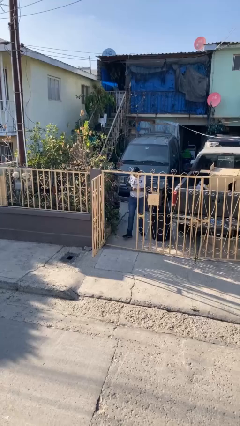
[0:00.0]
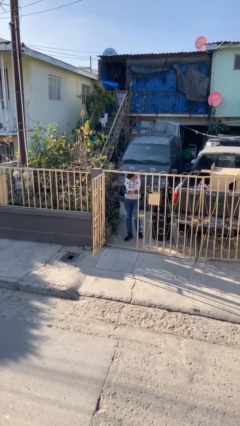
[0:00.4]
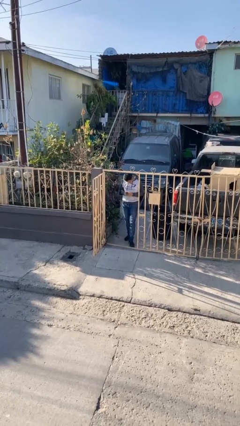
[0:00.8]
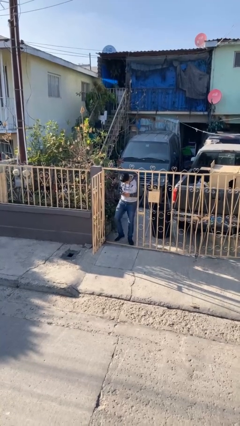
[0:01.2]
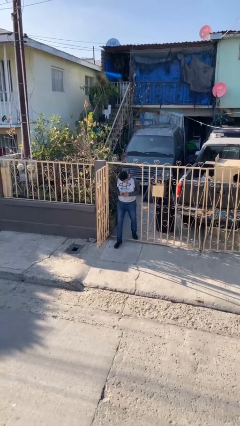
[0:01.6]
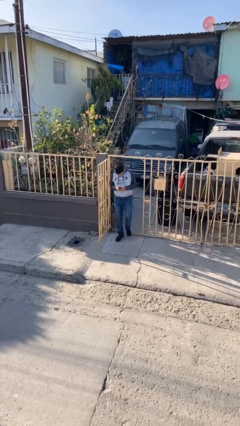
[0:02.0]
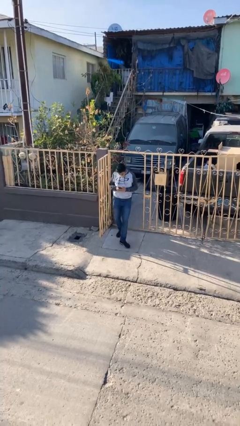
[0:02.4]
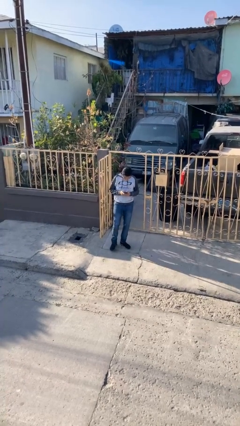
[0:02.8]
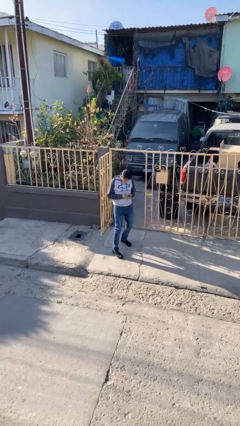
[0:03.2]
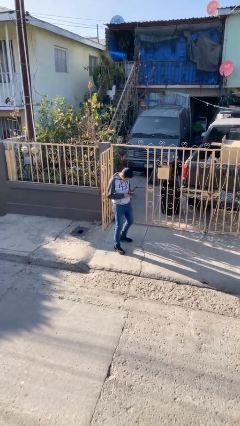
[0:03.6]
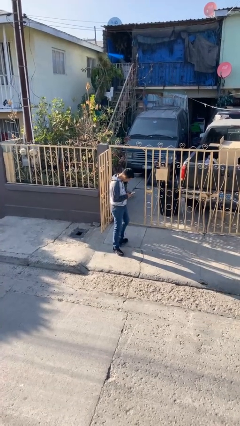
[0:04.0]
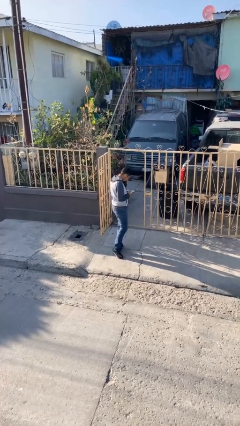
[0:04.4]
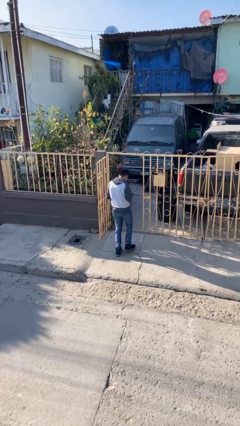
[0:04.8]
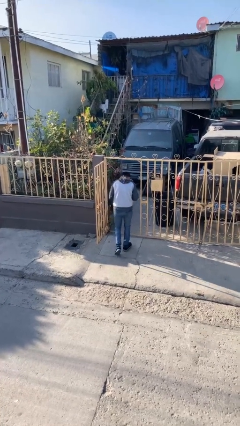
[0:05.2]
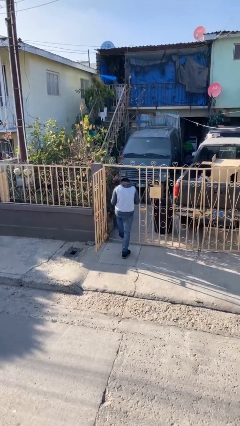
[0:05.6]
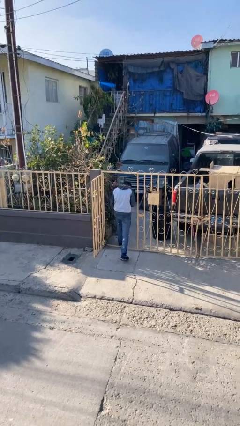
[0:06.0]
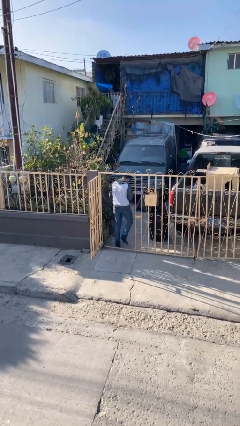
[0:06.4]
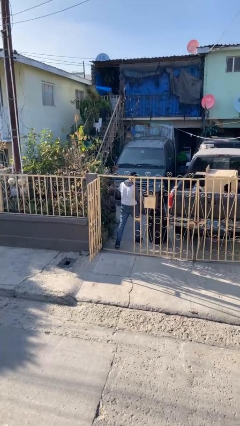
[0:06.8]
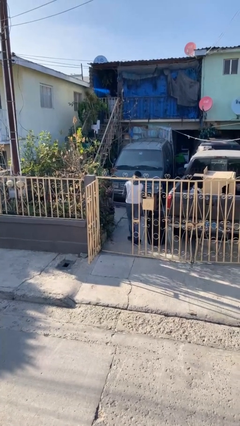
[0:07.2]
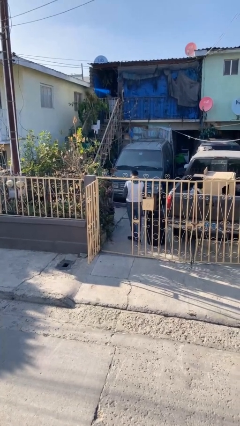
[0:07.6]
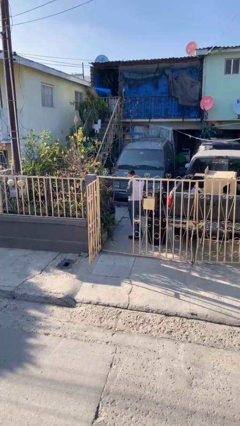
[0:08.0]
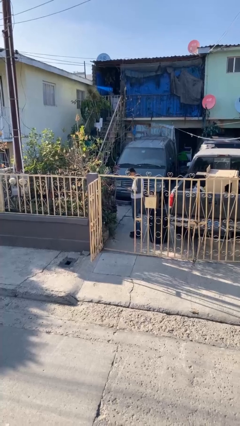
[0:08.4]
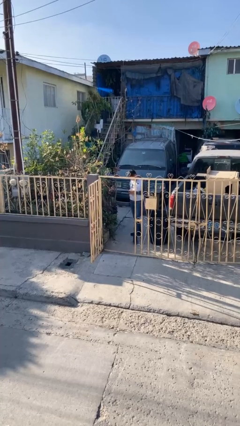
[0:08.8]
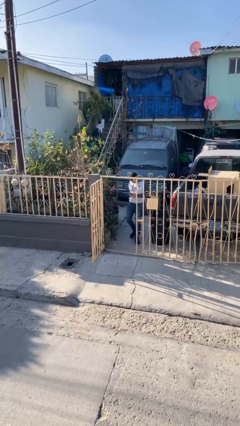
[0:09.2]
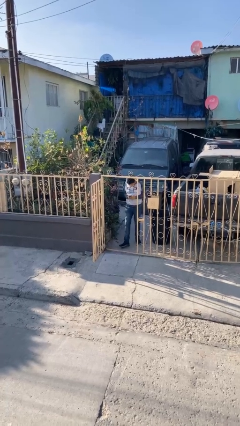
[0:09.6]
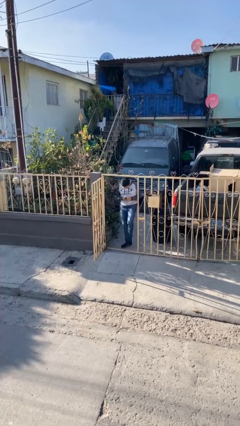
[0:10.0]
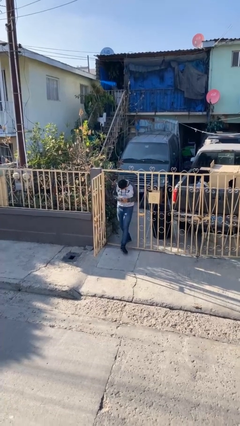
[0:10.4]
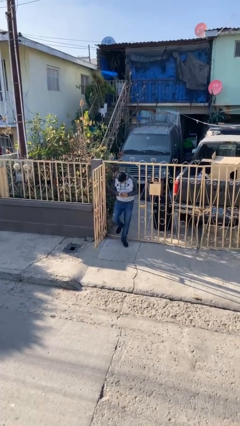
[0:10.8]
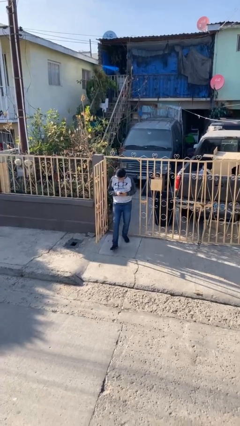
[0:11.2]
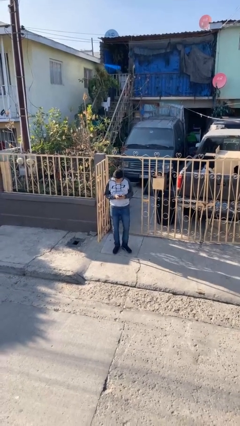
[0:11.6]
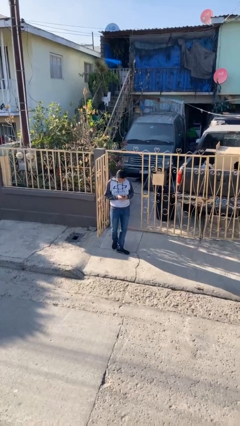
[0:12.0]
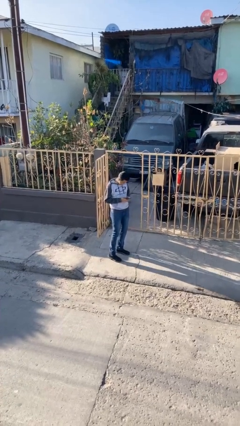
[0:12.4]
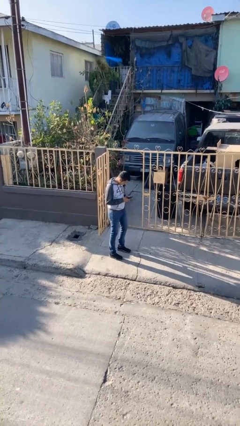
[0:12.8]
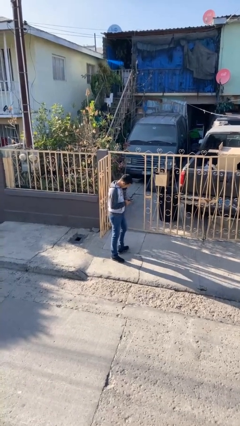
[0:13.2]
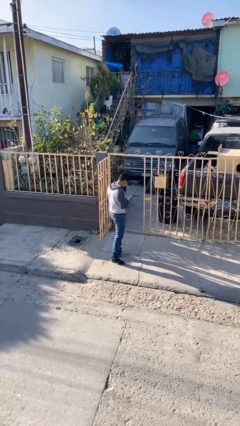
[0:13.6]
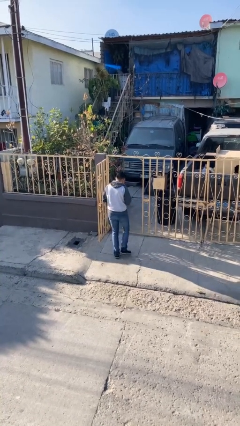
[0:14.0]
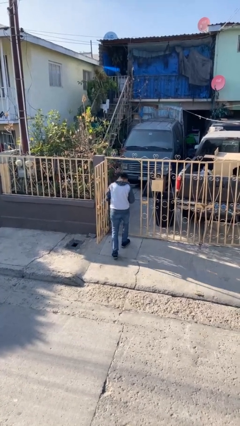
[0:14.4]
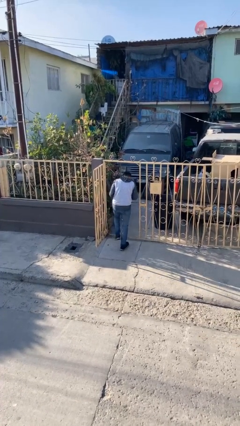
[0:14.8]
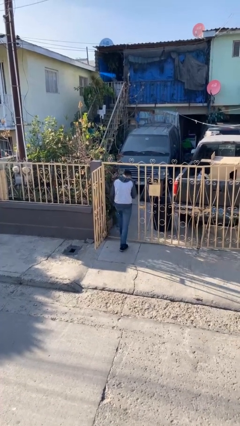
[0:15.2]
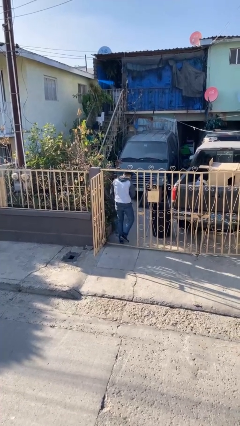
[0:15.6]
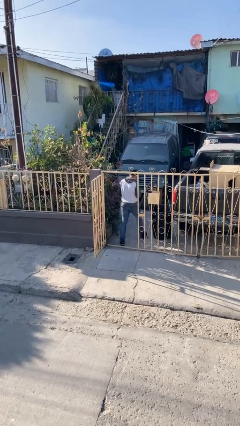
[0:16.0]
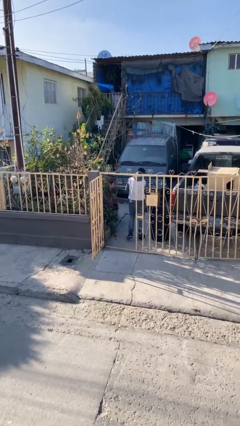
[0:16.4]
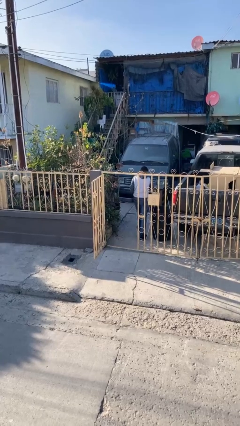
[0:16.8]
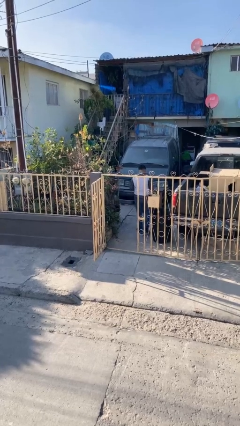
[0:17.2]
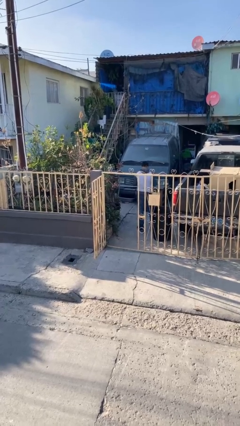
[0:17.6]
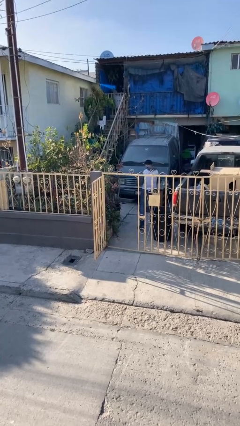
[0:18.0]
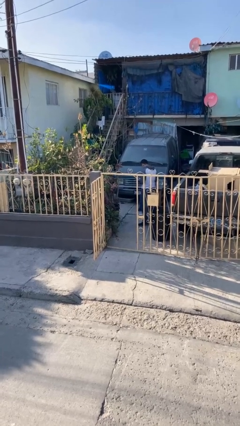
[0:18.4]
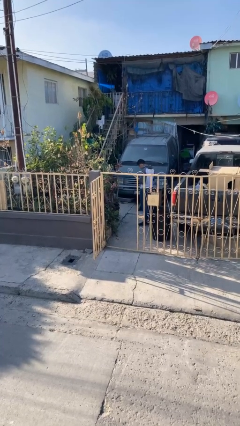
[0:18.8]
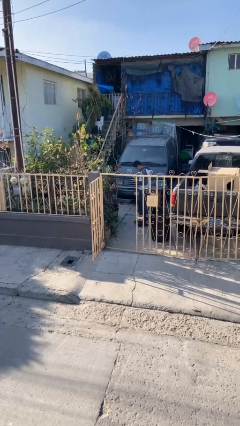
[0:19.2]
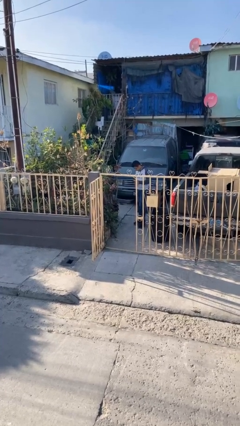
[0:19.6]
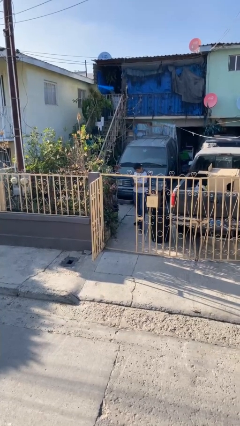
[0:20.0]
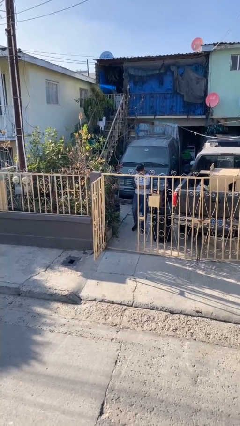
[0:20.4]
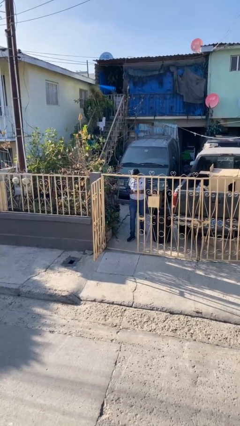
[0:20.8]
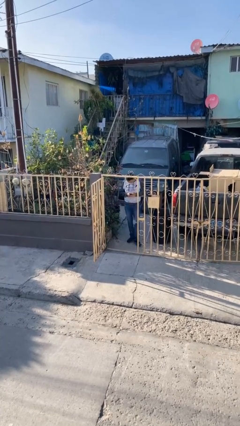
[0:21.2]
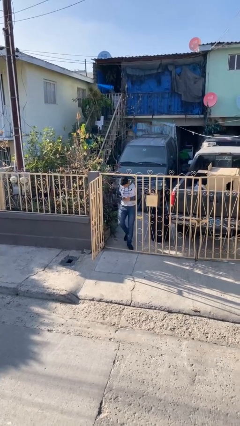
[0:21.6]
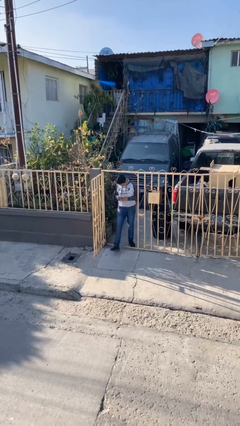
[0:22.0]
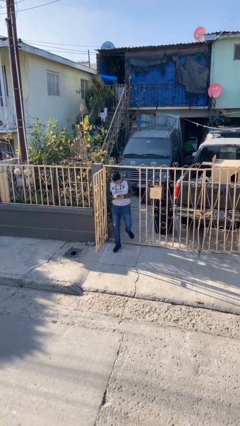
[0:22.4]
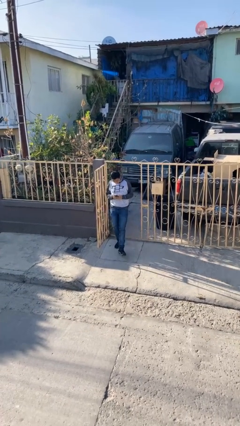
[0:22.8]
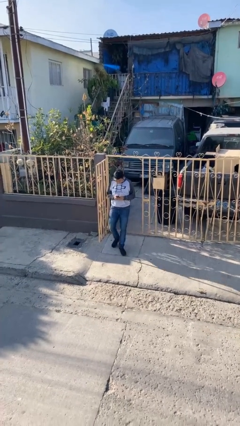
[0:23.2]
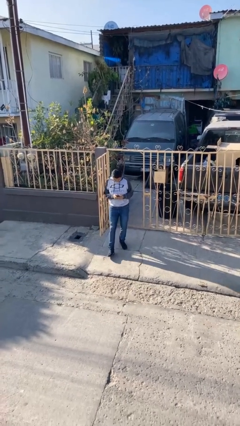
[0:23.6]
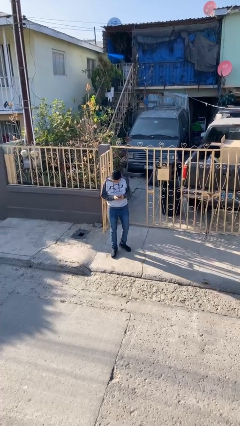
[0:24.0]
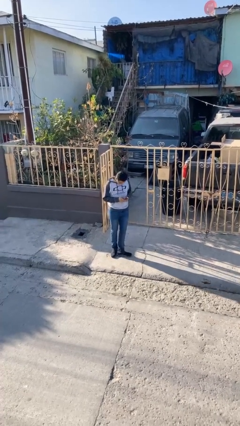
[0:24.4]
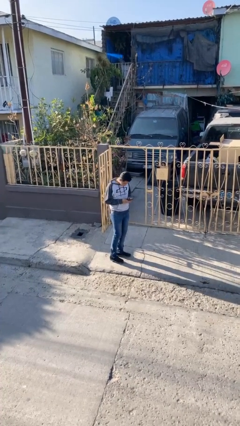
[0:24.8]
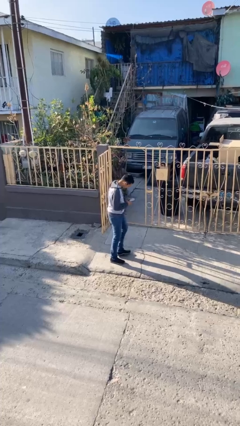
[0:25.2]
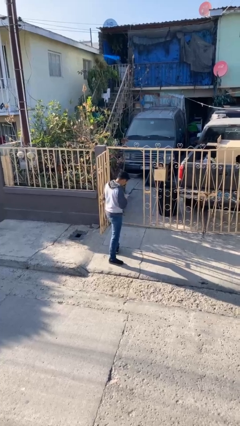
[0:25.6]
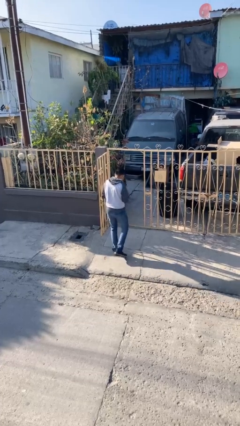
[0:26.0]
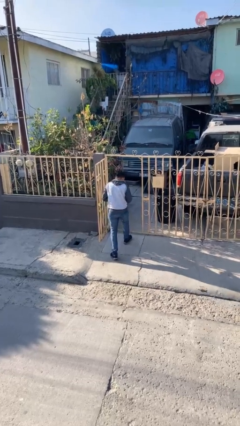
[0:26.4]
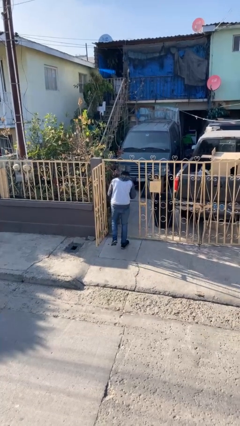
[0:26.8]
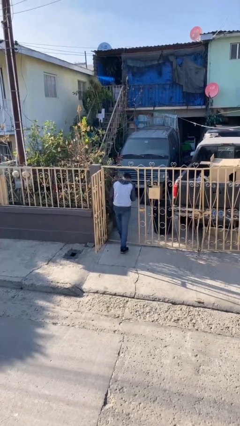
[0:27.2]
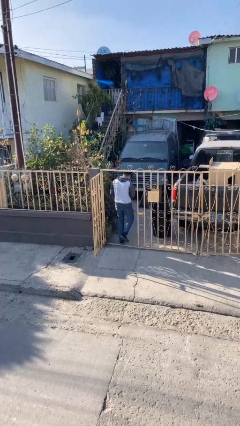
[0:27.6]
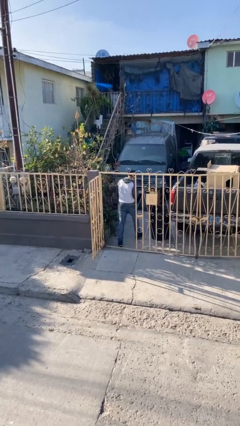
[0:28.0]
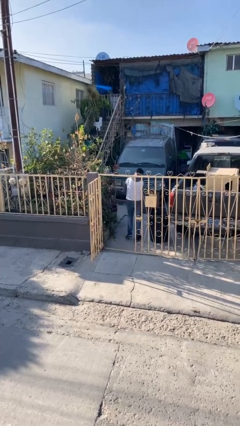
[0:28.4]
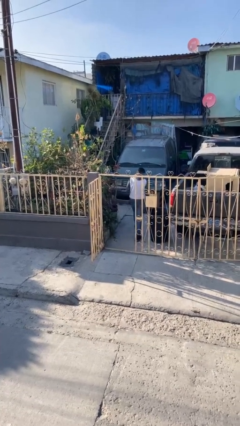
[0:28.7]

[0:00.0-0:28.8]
person texts on phone

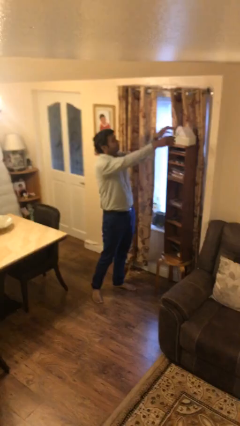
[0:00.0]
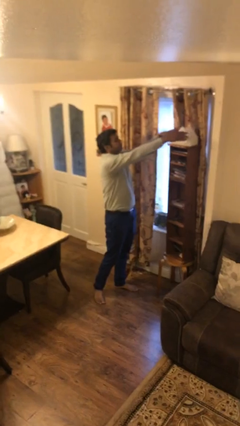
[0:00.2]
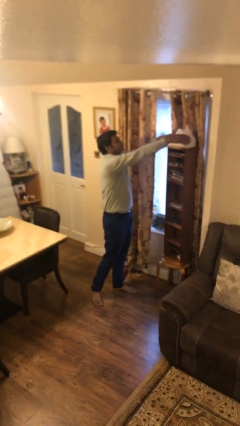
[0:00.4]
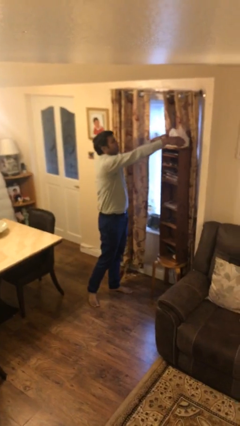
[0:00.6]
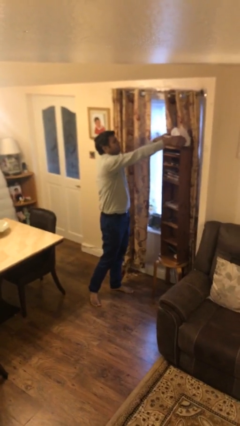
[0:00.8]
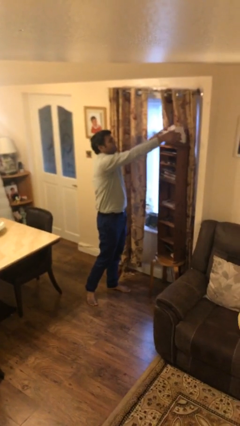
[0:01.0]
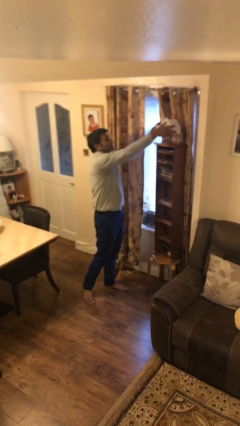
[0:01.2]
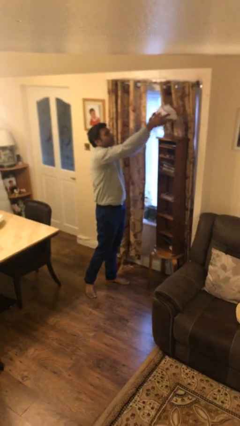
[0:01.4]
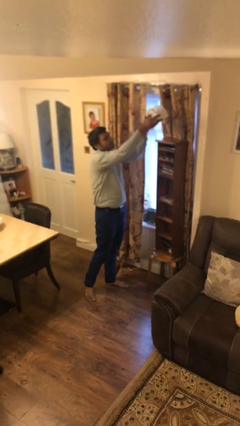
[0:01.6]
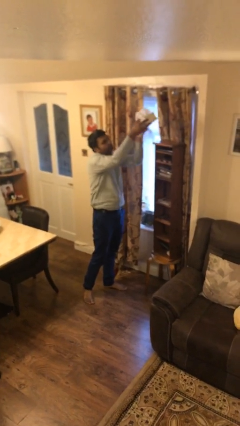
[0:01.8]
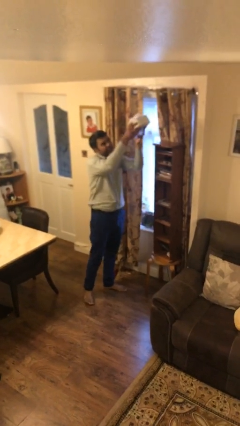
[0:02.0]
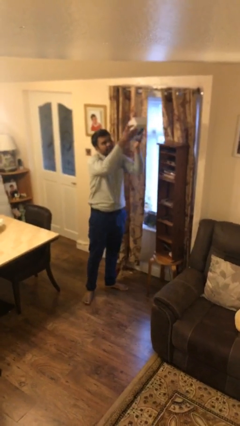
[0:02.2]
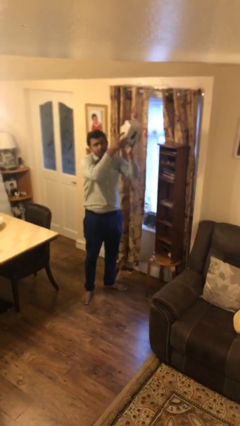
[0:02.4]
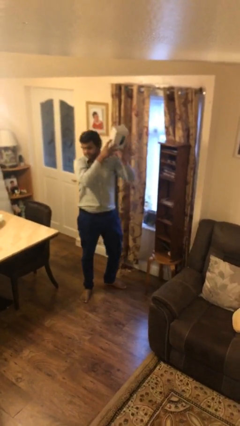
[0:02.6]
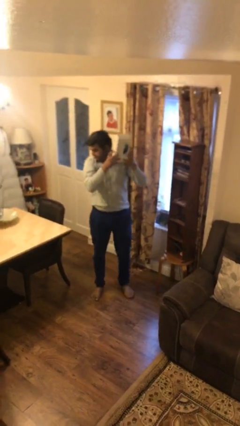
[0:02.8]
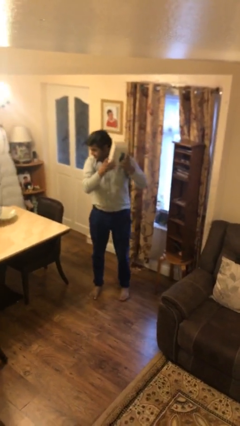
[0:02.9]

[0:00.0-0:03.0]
person picks up object from shelf

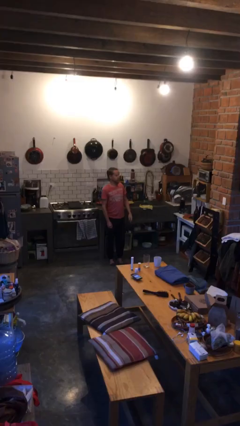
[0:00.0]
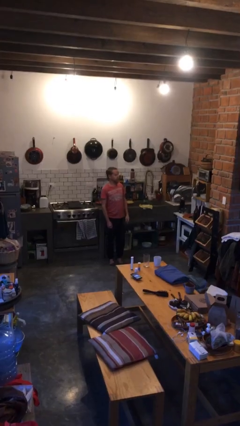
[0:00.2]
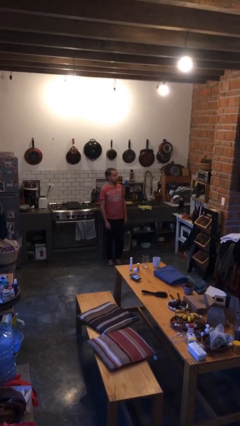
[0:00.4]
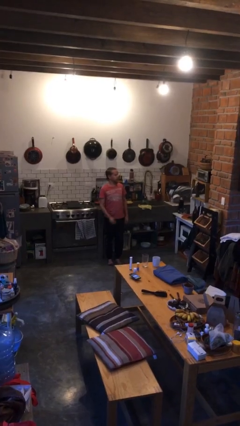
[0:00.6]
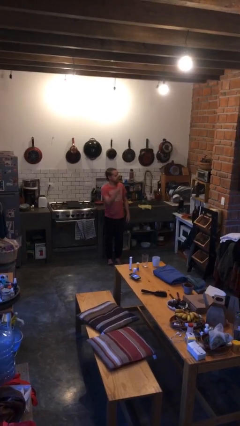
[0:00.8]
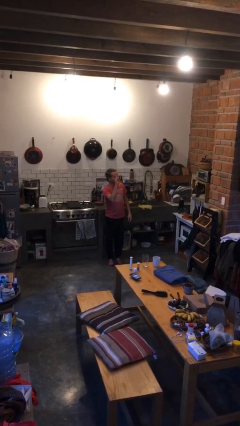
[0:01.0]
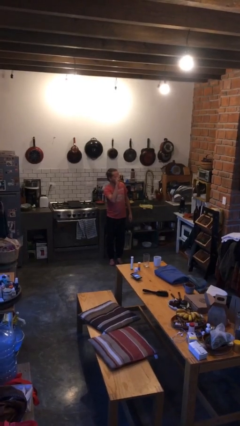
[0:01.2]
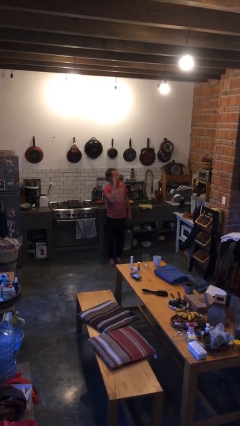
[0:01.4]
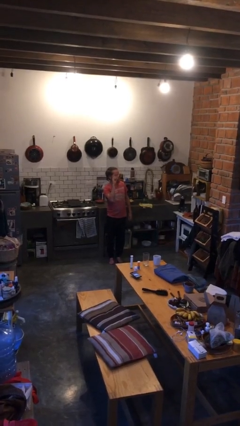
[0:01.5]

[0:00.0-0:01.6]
person gestures raise hand
